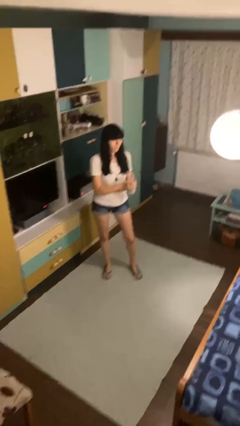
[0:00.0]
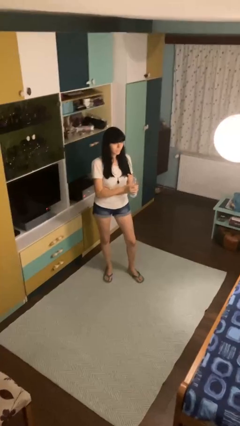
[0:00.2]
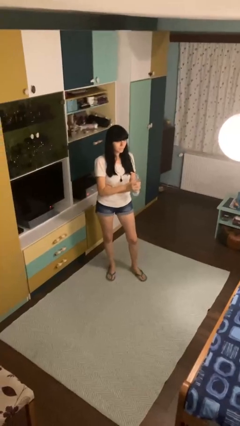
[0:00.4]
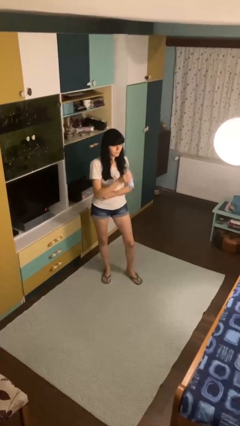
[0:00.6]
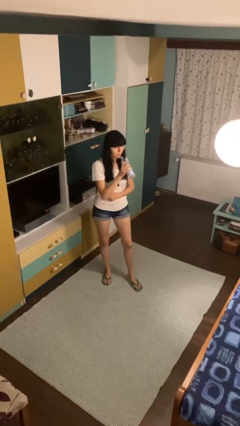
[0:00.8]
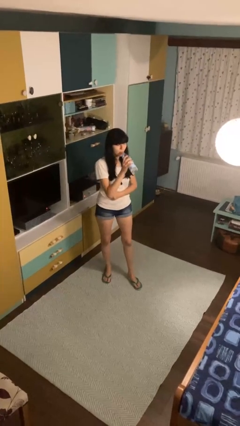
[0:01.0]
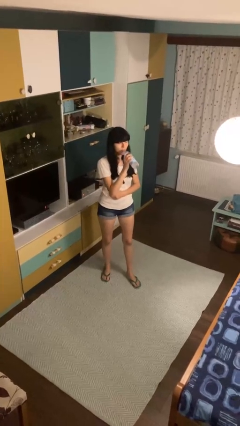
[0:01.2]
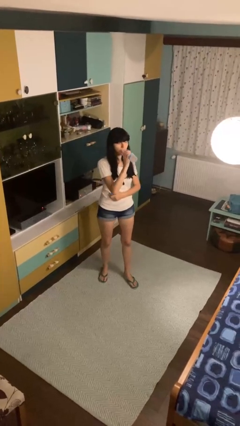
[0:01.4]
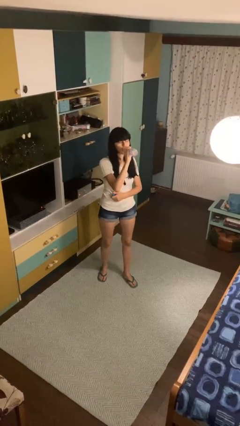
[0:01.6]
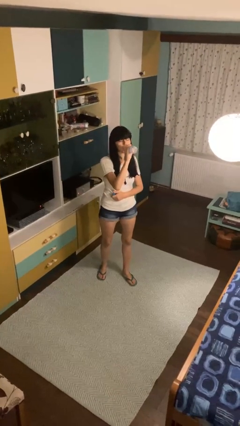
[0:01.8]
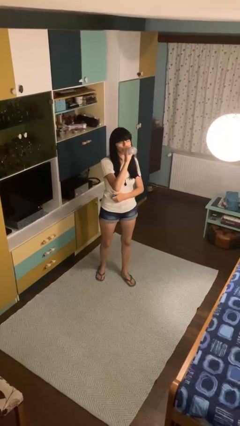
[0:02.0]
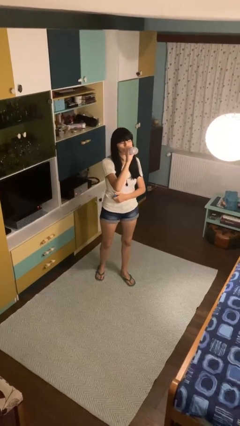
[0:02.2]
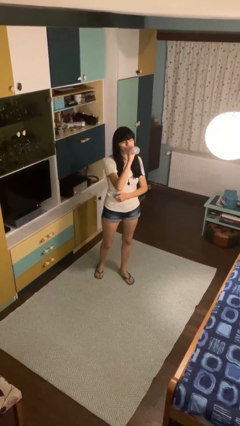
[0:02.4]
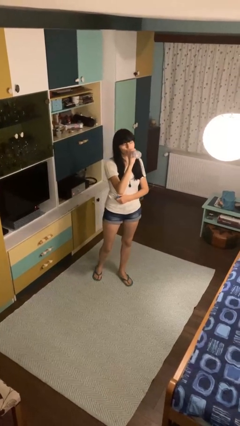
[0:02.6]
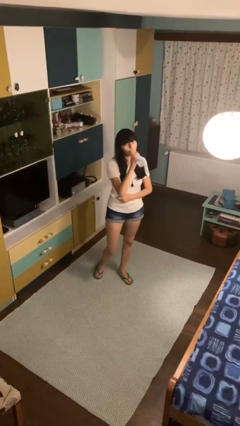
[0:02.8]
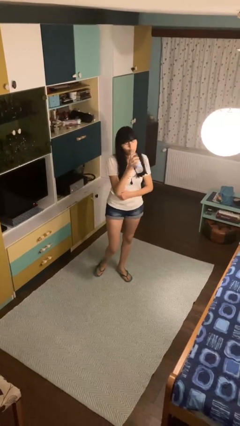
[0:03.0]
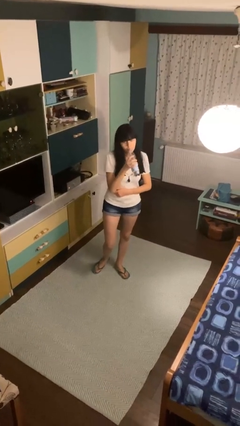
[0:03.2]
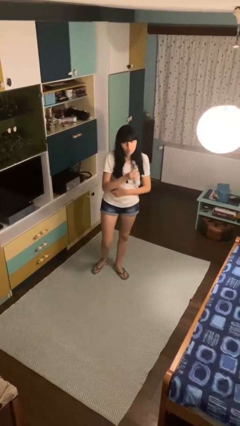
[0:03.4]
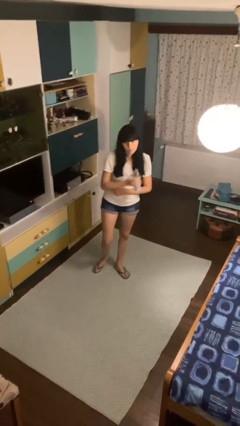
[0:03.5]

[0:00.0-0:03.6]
person drinks from bottle

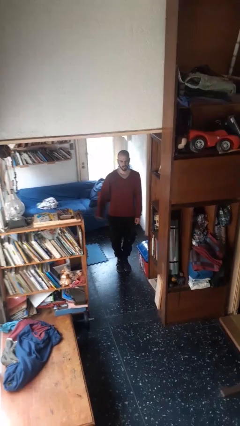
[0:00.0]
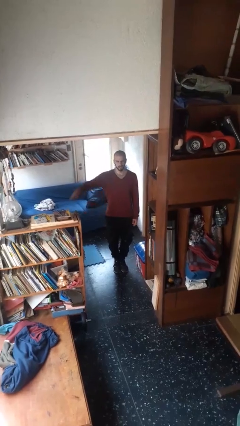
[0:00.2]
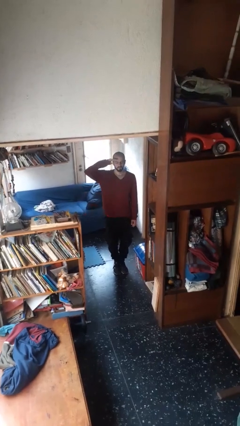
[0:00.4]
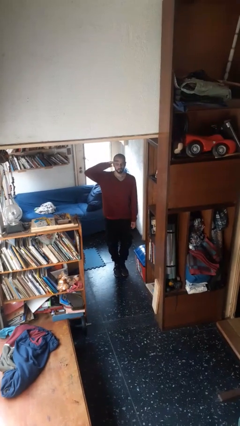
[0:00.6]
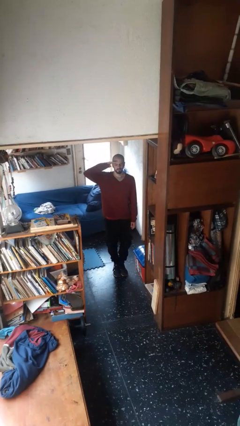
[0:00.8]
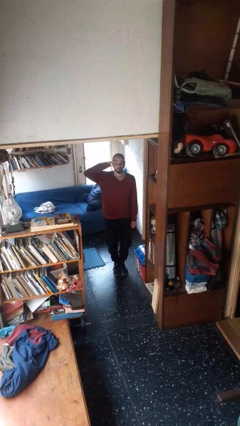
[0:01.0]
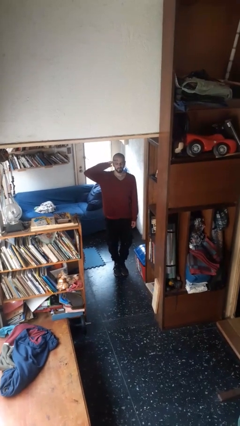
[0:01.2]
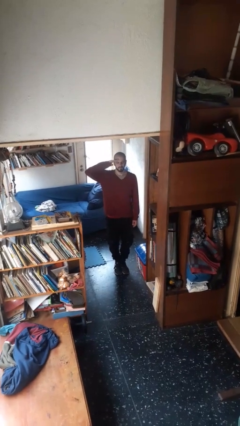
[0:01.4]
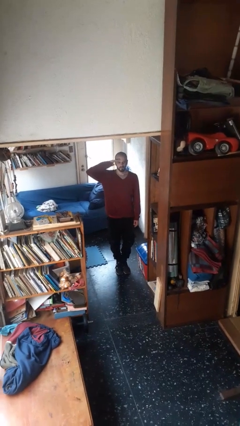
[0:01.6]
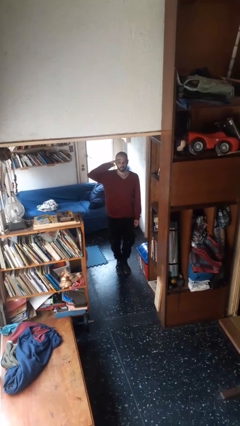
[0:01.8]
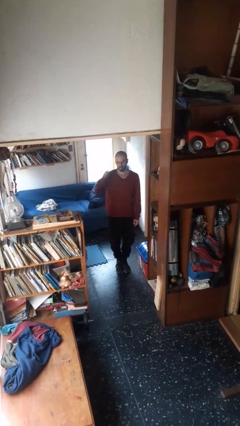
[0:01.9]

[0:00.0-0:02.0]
person salutes

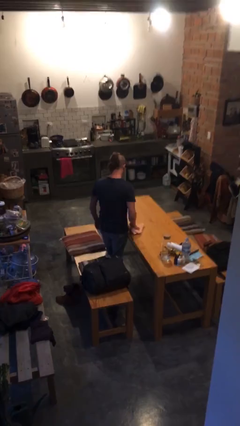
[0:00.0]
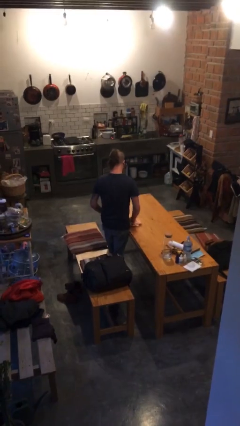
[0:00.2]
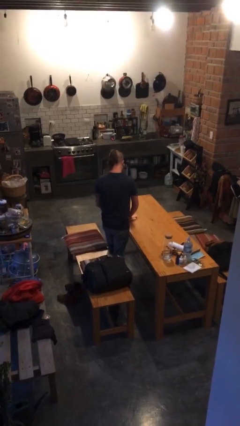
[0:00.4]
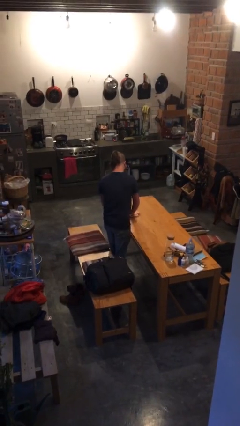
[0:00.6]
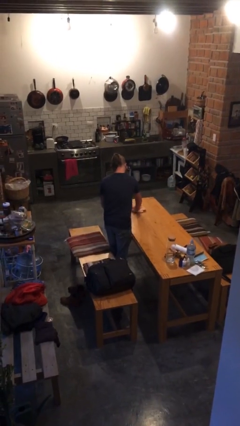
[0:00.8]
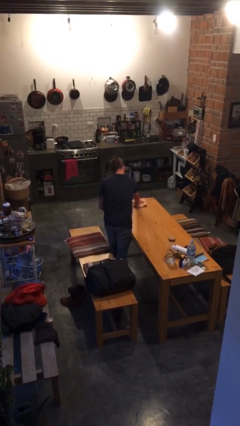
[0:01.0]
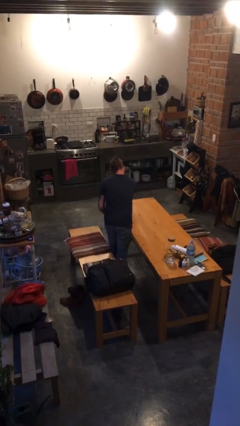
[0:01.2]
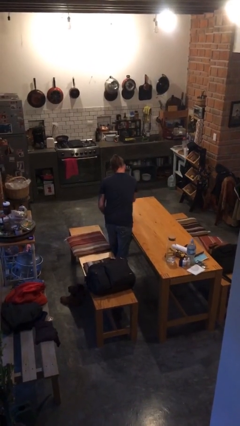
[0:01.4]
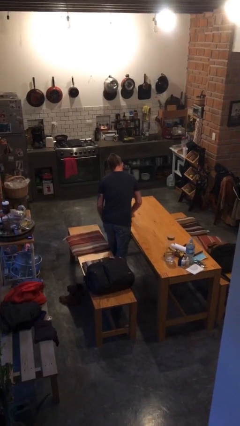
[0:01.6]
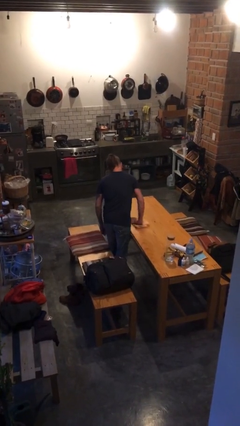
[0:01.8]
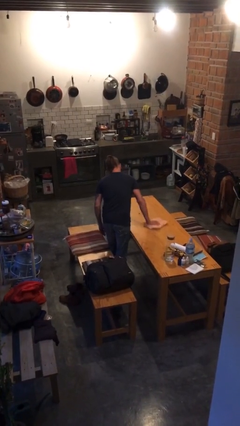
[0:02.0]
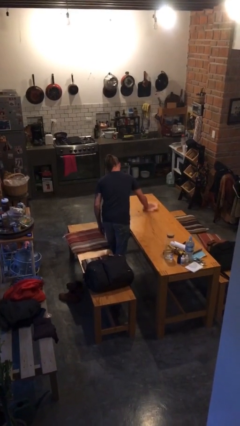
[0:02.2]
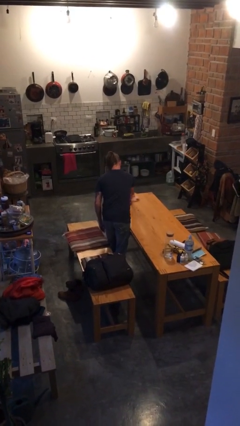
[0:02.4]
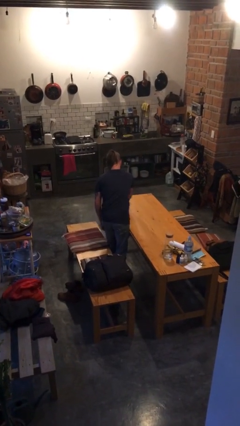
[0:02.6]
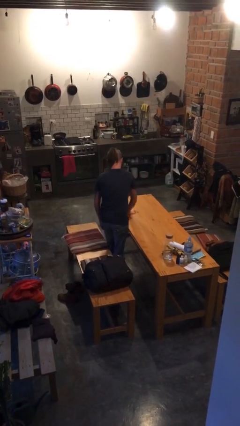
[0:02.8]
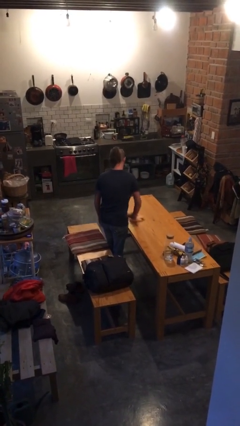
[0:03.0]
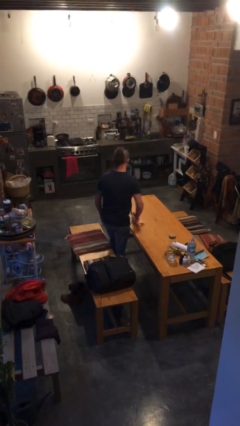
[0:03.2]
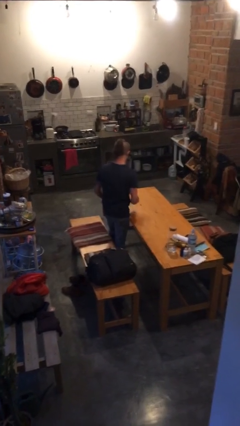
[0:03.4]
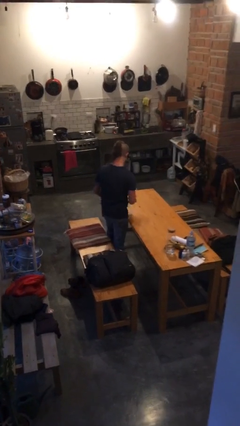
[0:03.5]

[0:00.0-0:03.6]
person cleans table with rag

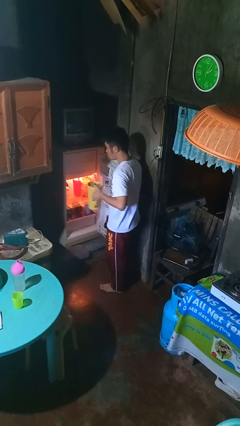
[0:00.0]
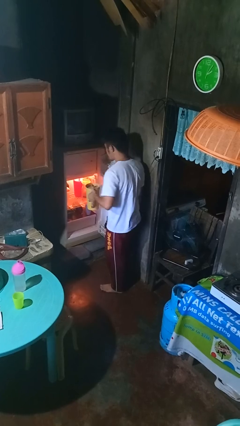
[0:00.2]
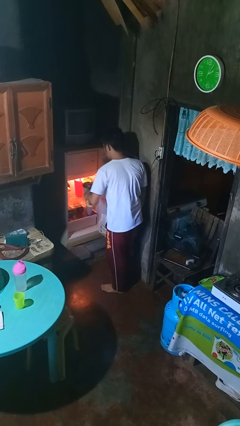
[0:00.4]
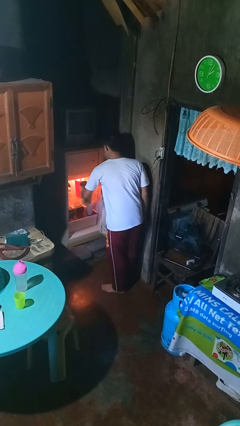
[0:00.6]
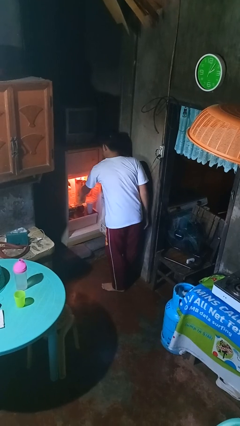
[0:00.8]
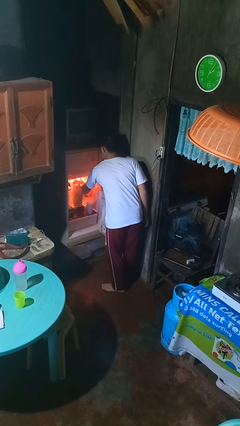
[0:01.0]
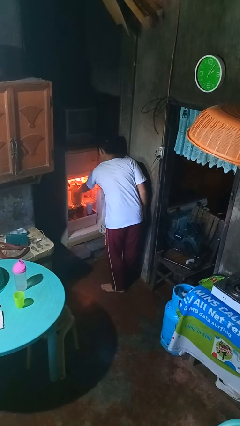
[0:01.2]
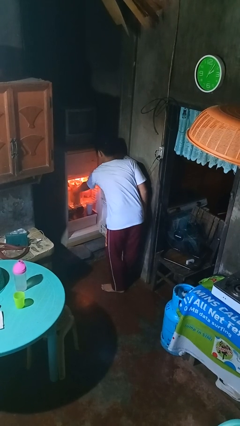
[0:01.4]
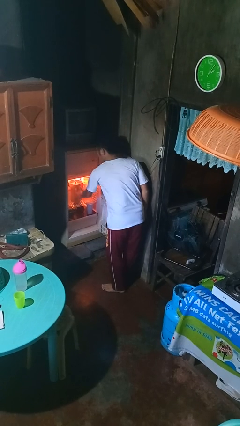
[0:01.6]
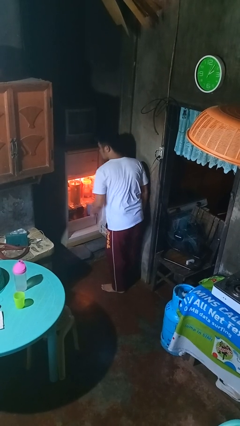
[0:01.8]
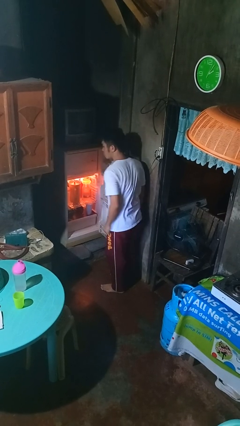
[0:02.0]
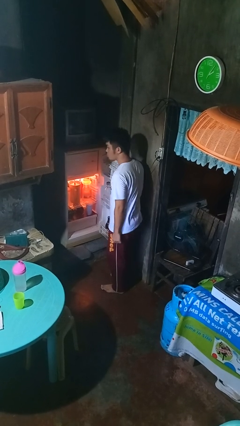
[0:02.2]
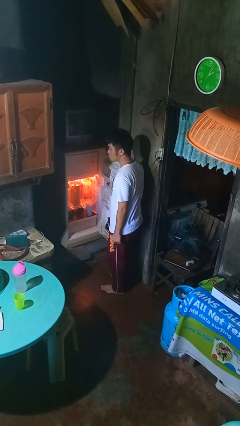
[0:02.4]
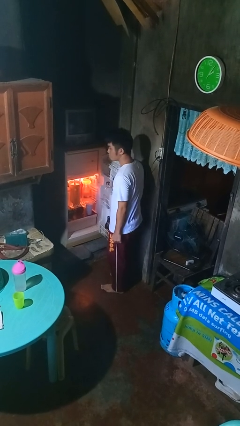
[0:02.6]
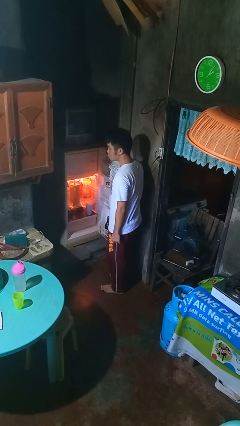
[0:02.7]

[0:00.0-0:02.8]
person puts object into refrigerator

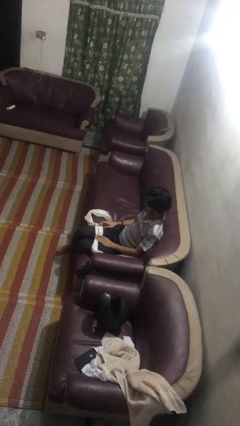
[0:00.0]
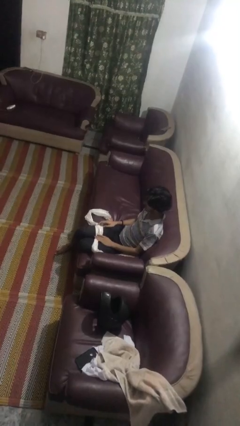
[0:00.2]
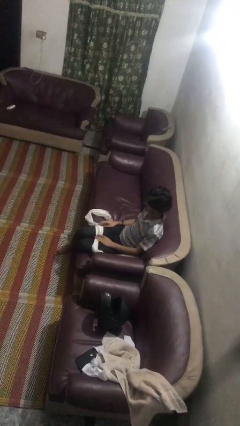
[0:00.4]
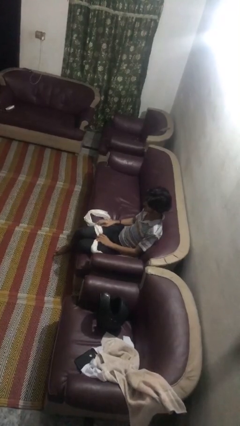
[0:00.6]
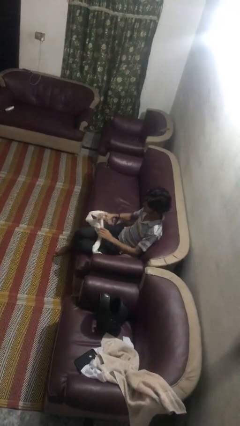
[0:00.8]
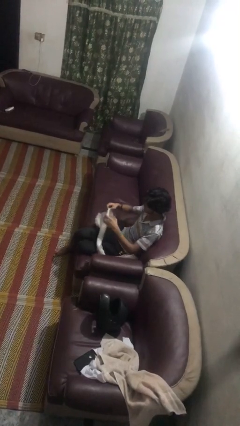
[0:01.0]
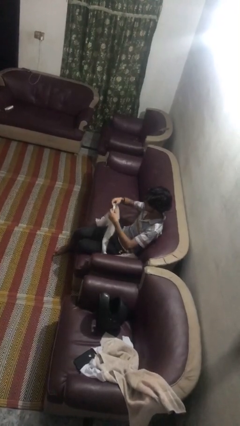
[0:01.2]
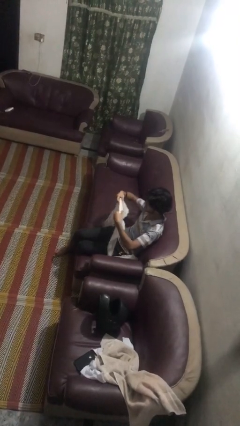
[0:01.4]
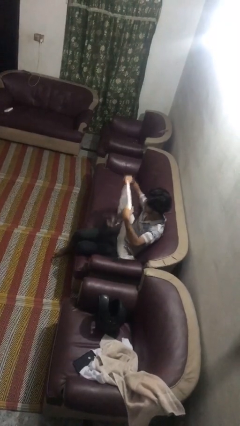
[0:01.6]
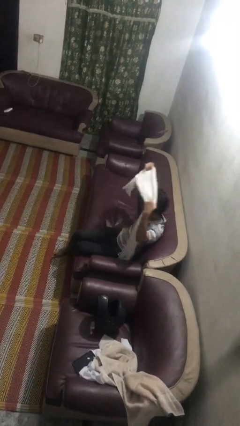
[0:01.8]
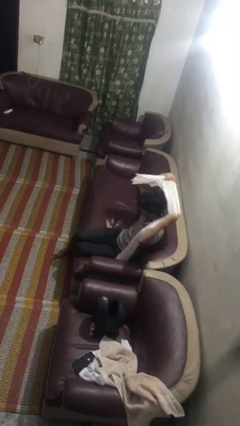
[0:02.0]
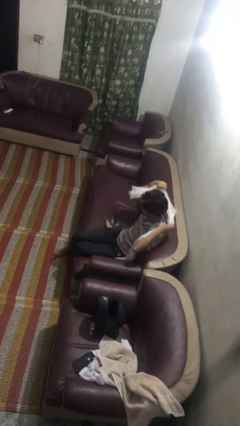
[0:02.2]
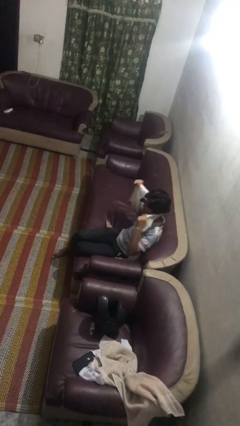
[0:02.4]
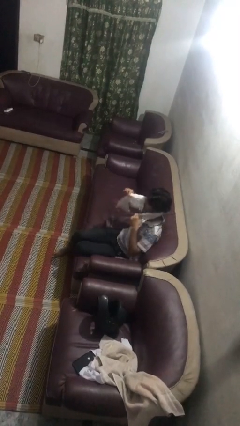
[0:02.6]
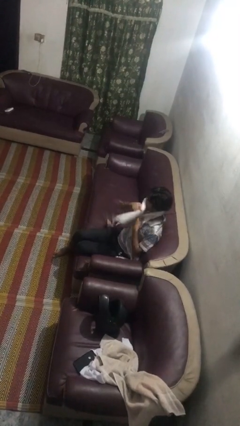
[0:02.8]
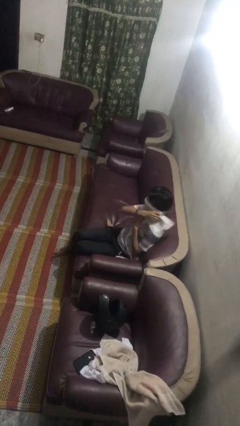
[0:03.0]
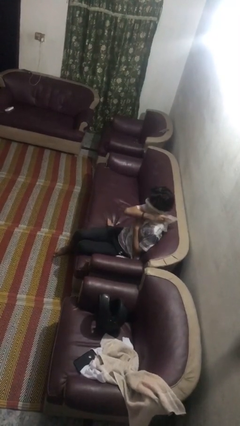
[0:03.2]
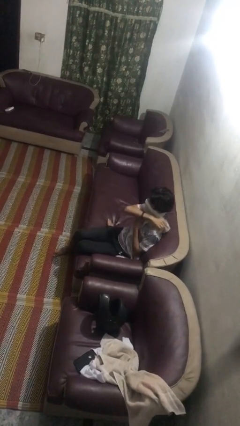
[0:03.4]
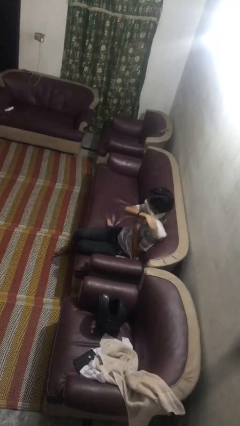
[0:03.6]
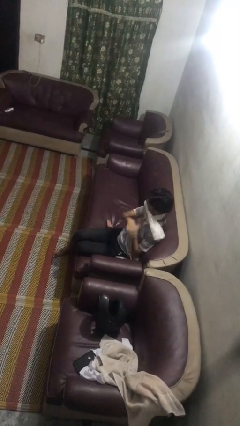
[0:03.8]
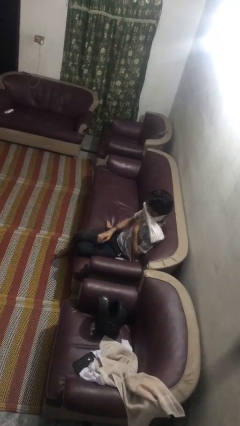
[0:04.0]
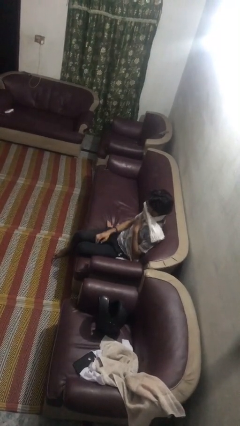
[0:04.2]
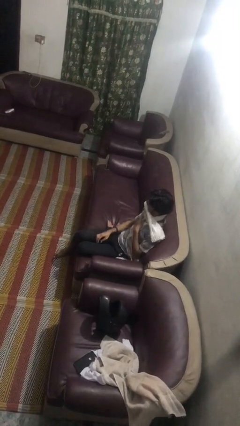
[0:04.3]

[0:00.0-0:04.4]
person puts on scarf

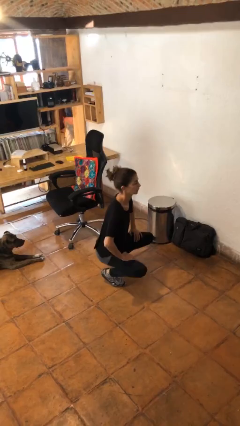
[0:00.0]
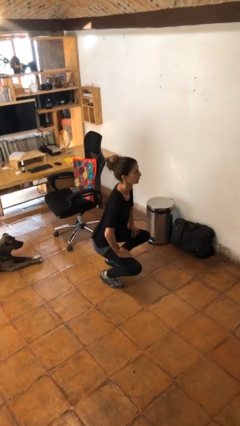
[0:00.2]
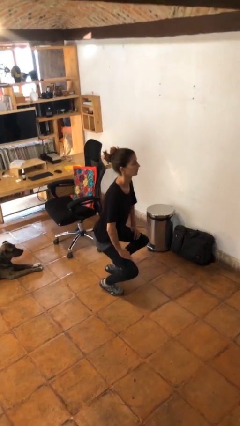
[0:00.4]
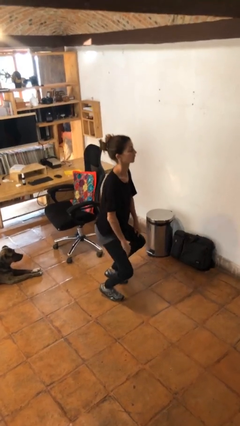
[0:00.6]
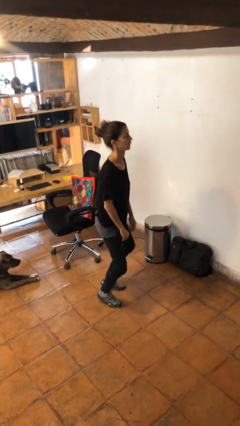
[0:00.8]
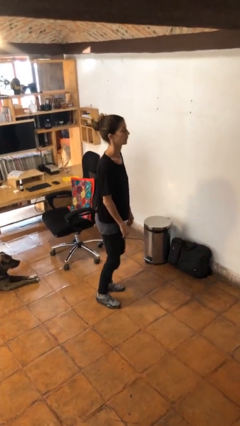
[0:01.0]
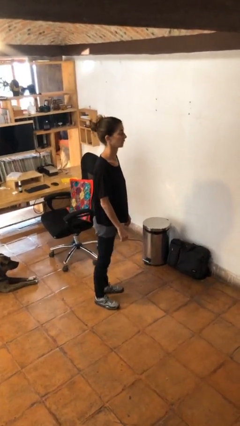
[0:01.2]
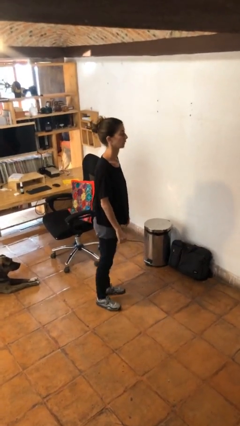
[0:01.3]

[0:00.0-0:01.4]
person stands up
